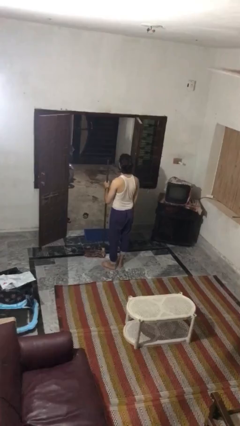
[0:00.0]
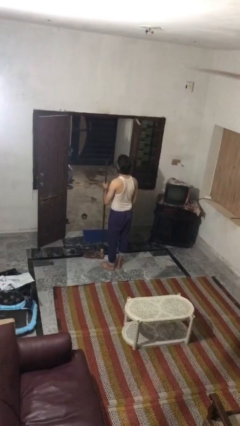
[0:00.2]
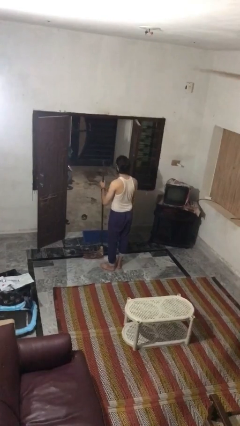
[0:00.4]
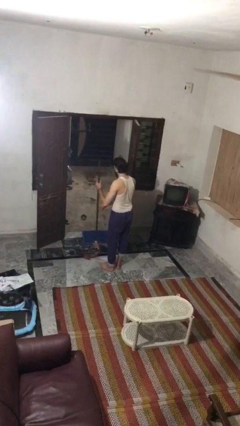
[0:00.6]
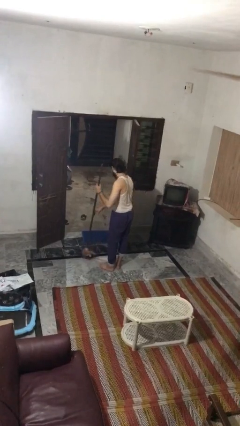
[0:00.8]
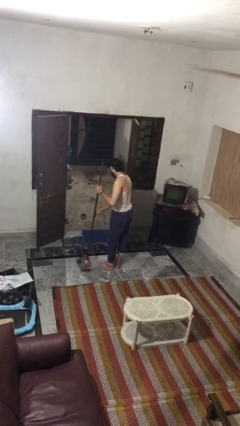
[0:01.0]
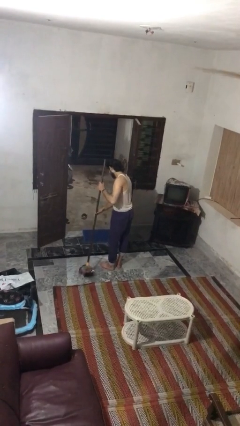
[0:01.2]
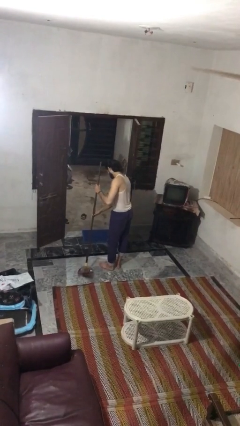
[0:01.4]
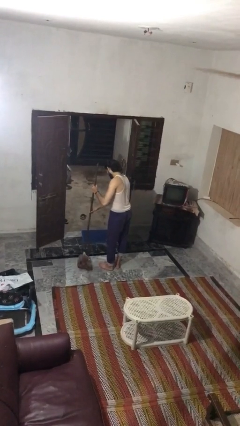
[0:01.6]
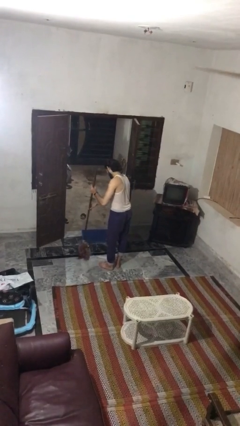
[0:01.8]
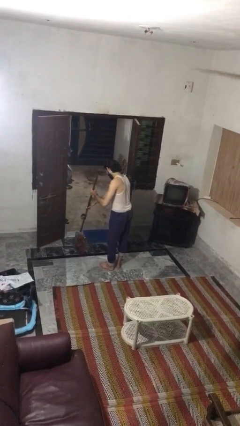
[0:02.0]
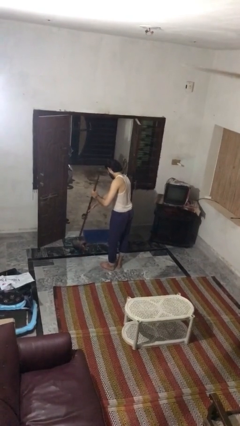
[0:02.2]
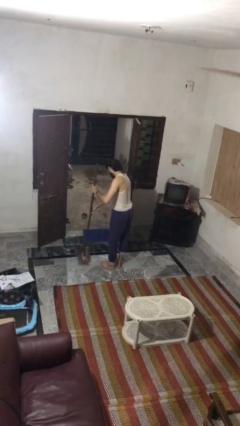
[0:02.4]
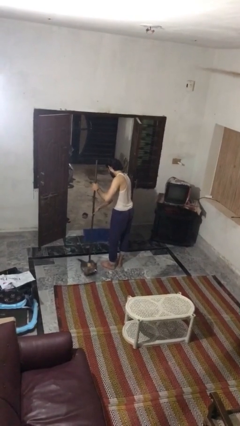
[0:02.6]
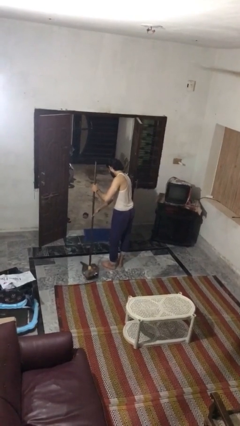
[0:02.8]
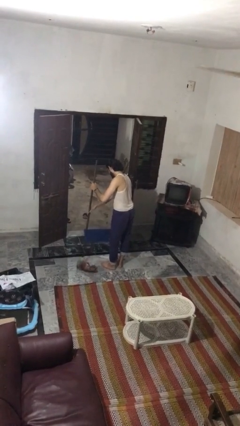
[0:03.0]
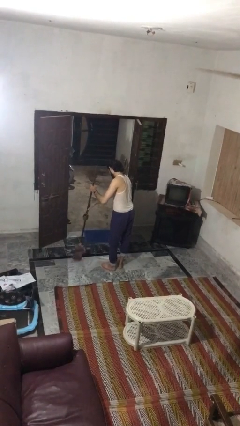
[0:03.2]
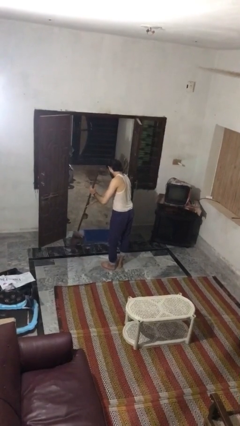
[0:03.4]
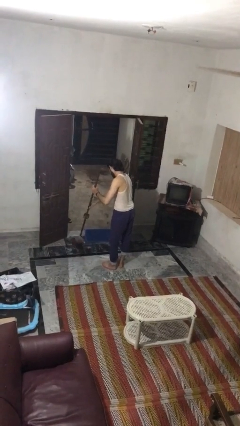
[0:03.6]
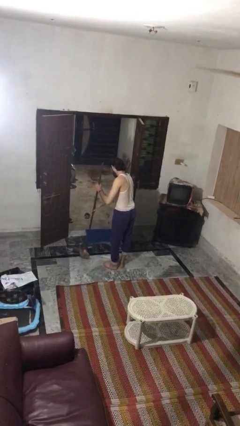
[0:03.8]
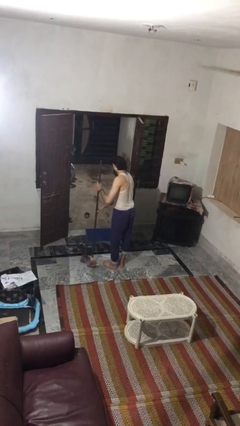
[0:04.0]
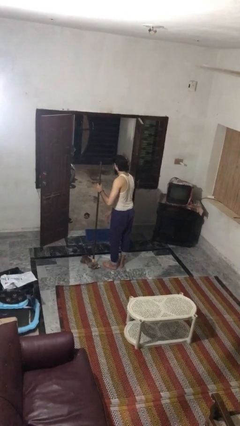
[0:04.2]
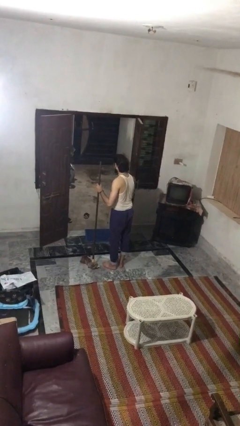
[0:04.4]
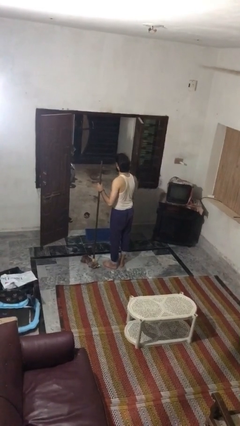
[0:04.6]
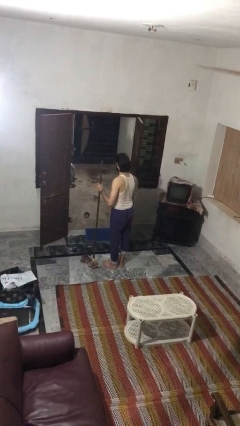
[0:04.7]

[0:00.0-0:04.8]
person mops

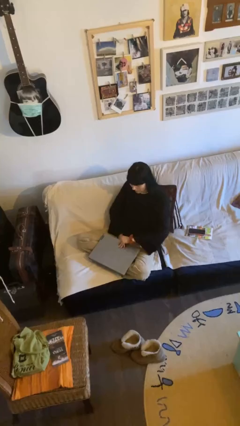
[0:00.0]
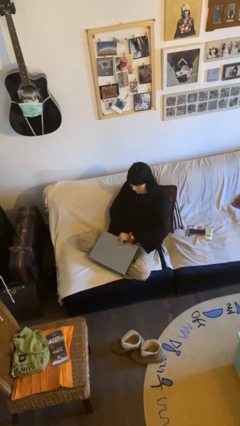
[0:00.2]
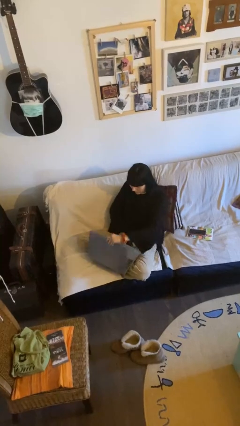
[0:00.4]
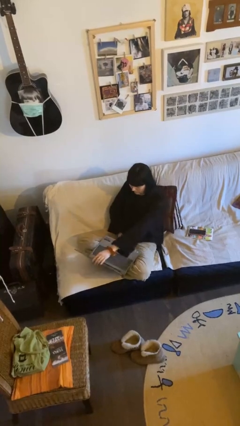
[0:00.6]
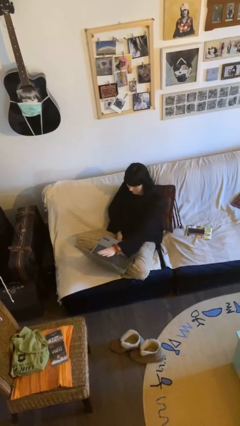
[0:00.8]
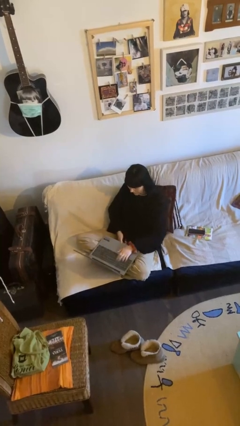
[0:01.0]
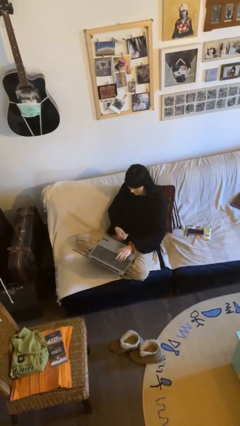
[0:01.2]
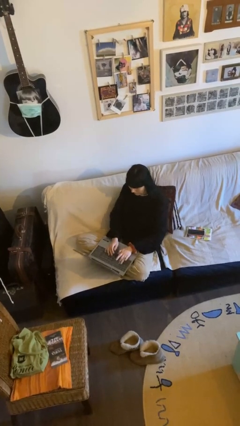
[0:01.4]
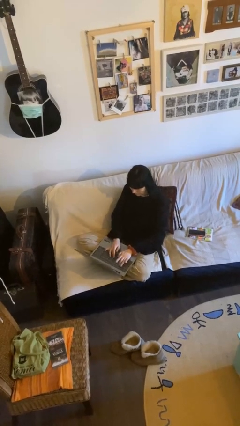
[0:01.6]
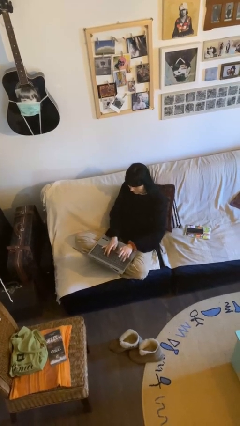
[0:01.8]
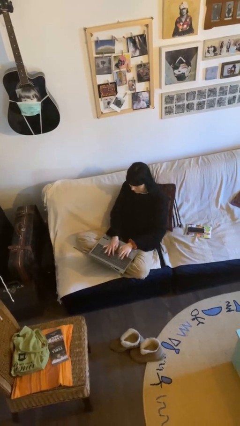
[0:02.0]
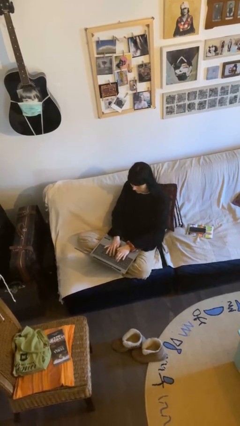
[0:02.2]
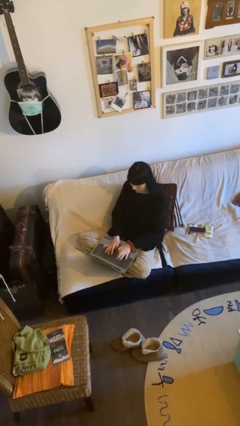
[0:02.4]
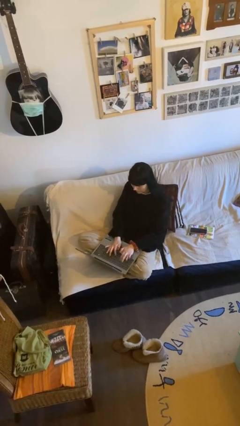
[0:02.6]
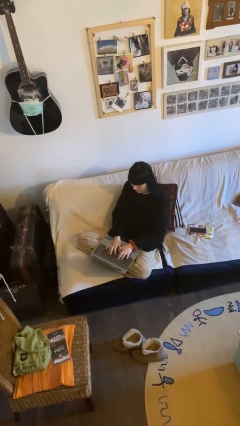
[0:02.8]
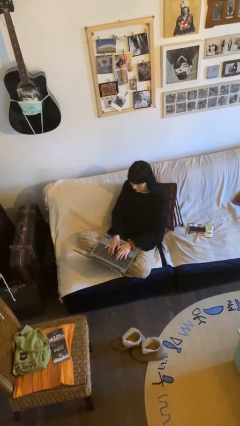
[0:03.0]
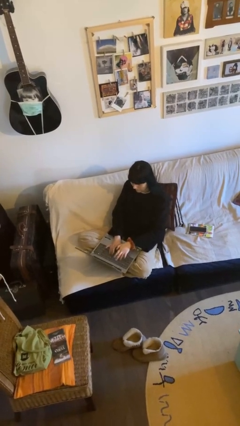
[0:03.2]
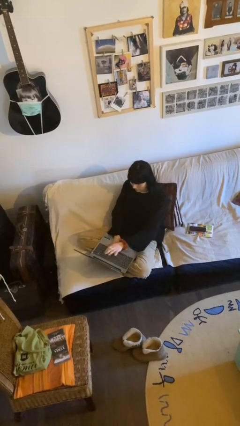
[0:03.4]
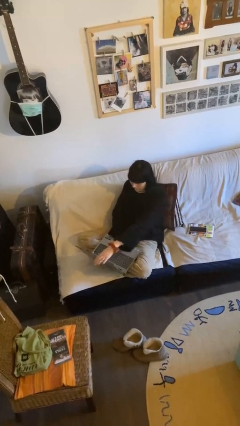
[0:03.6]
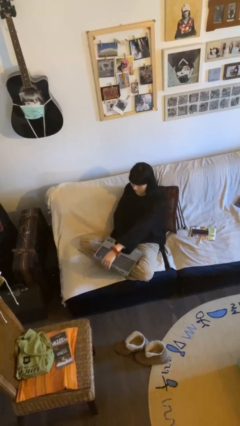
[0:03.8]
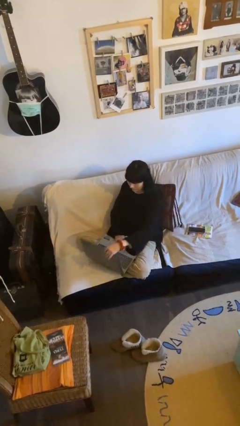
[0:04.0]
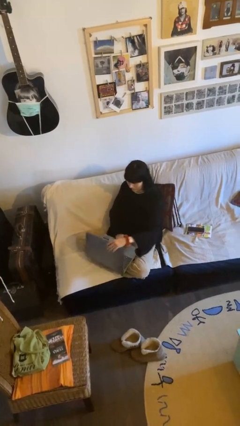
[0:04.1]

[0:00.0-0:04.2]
person interacts with laptop

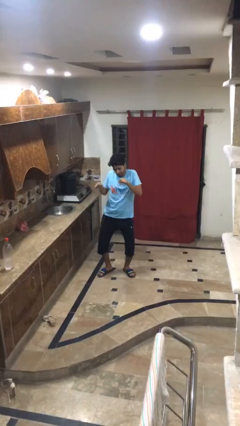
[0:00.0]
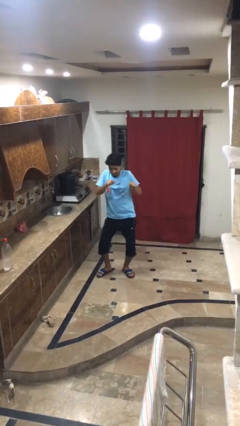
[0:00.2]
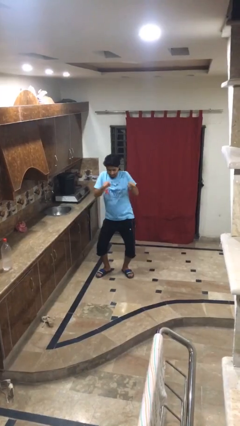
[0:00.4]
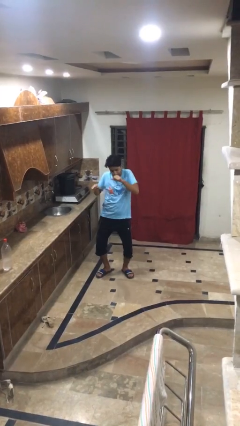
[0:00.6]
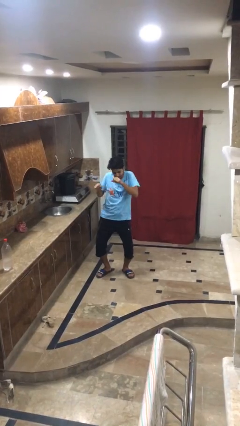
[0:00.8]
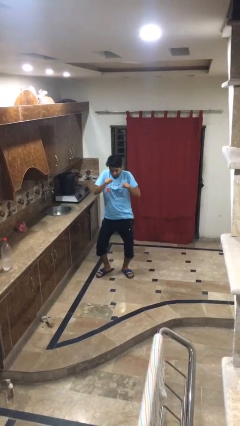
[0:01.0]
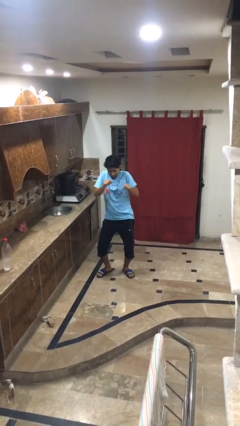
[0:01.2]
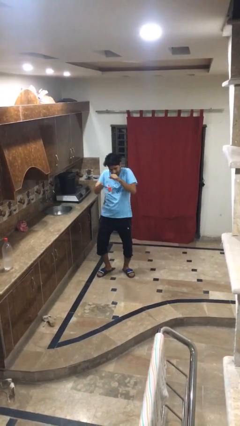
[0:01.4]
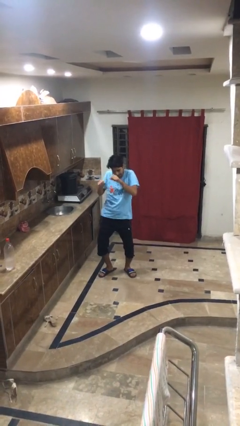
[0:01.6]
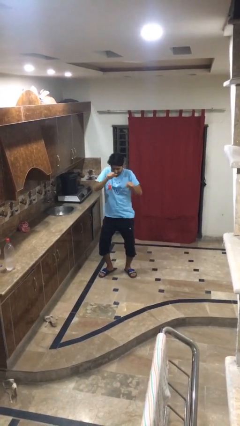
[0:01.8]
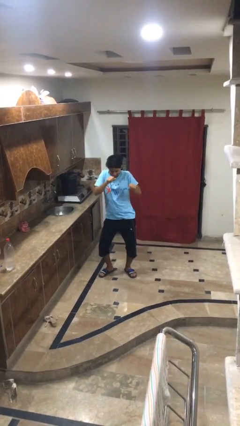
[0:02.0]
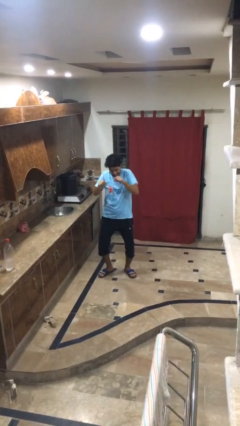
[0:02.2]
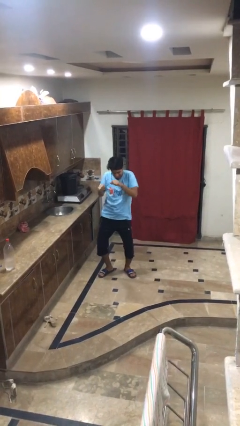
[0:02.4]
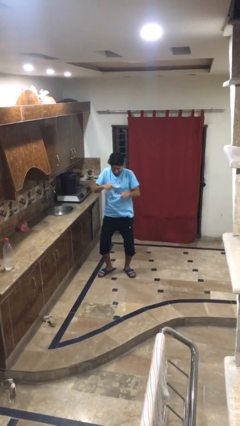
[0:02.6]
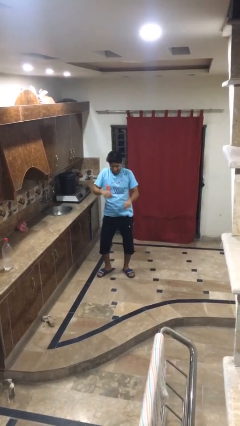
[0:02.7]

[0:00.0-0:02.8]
person dances in place

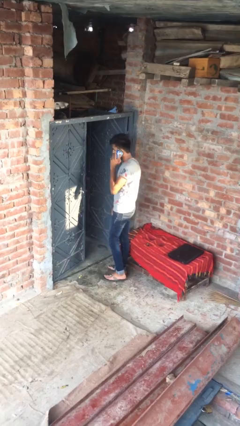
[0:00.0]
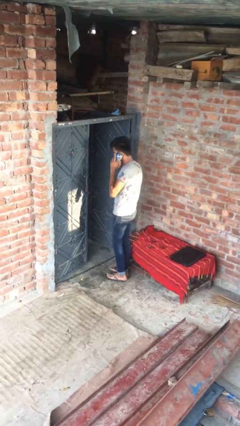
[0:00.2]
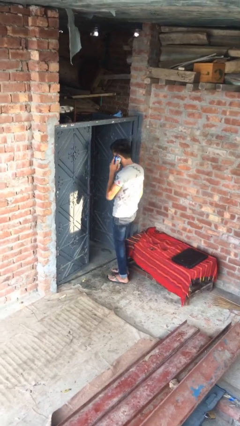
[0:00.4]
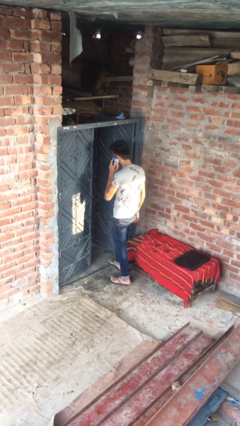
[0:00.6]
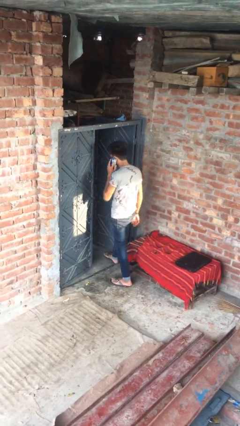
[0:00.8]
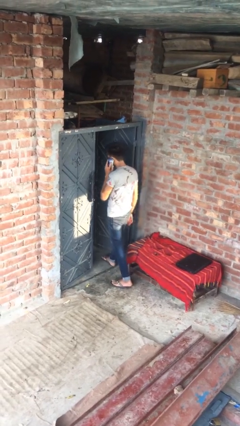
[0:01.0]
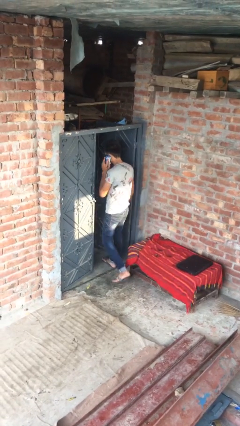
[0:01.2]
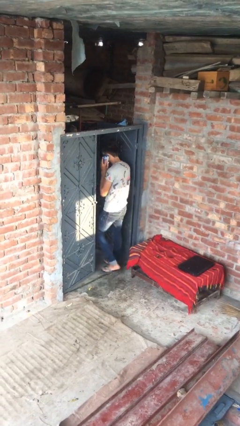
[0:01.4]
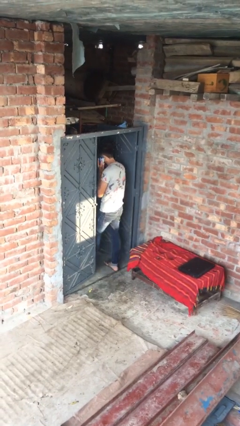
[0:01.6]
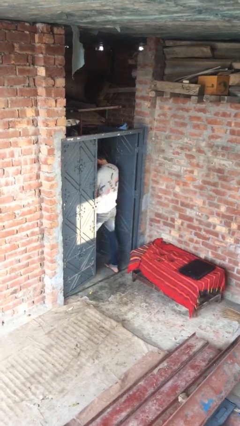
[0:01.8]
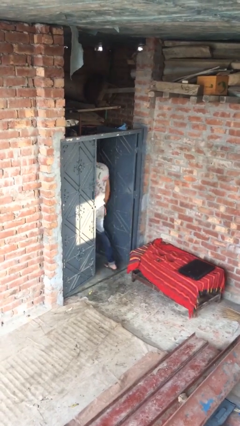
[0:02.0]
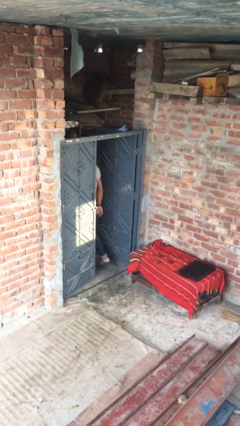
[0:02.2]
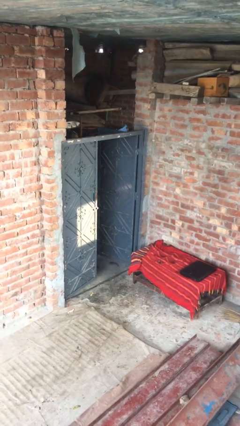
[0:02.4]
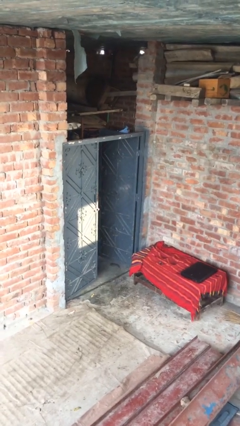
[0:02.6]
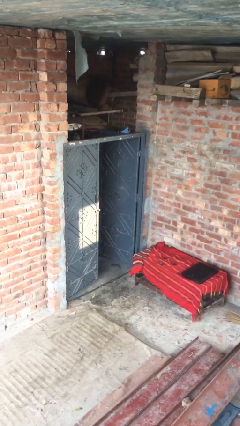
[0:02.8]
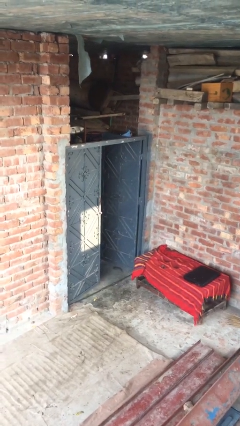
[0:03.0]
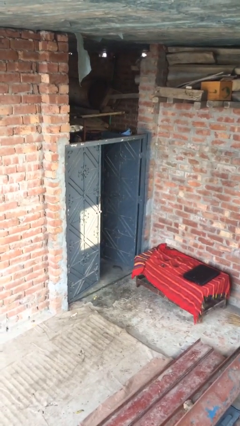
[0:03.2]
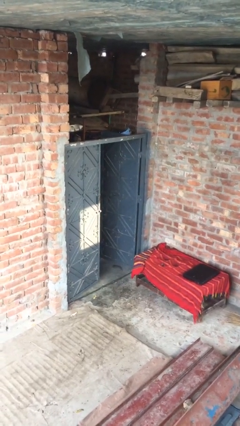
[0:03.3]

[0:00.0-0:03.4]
person exits scene through structure

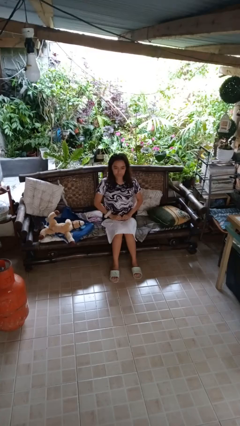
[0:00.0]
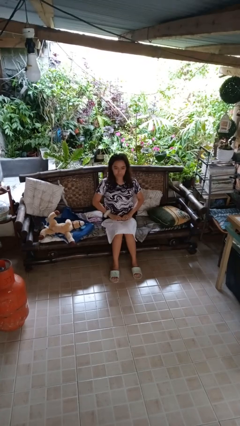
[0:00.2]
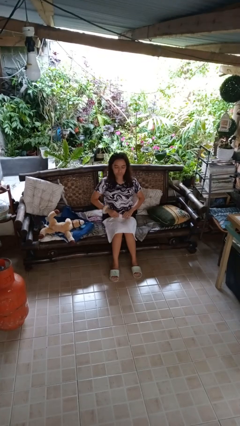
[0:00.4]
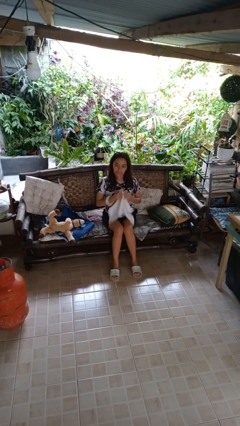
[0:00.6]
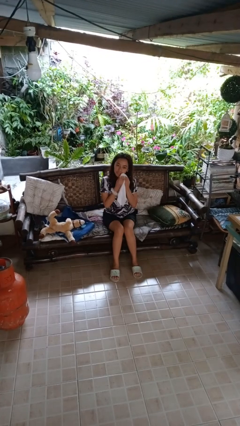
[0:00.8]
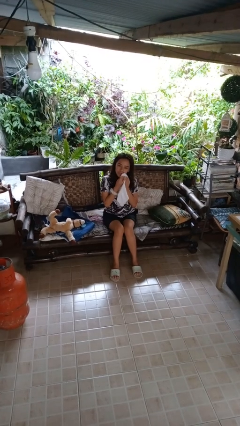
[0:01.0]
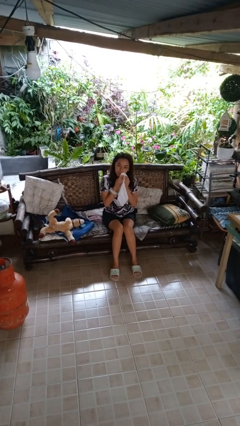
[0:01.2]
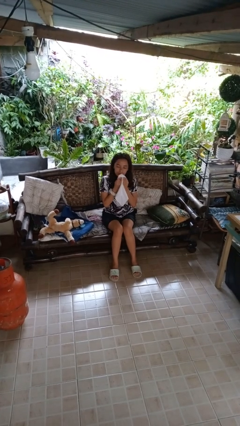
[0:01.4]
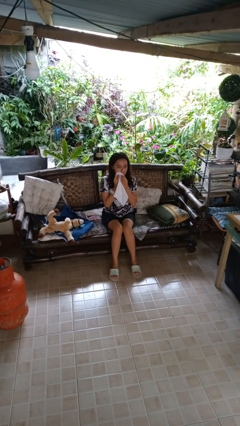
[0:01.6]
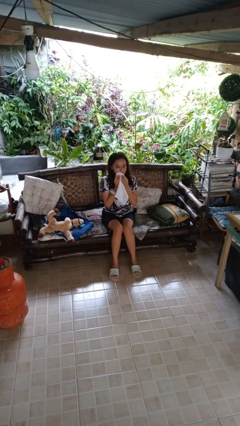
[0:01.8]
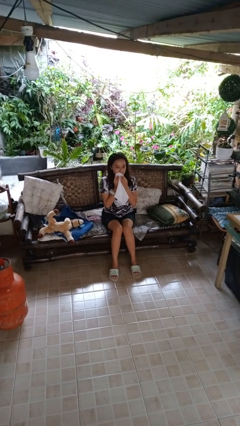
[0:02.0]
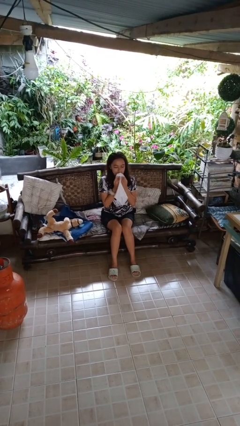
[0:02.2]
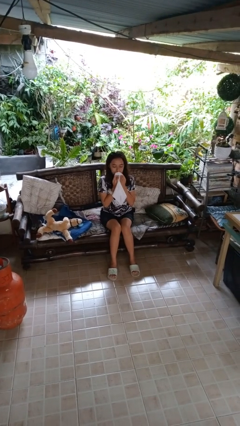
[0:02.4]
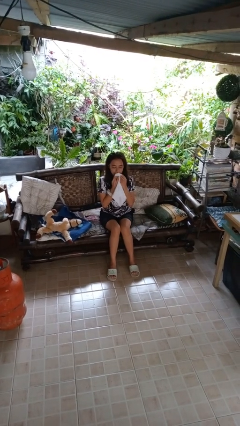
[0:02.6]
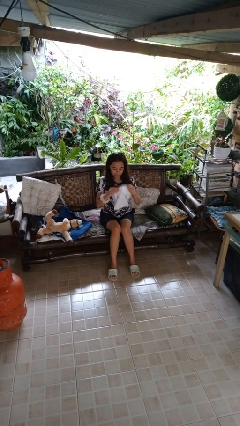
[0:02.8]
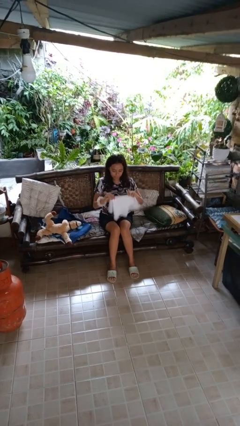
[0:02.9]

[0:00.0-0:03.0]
person wipes mouth with napkin
